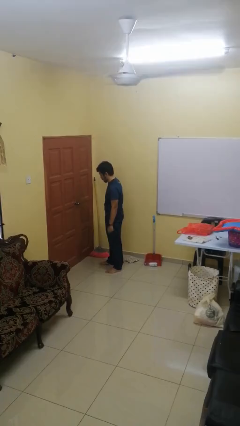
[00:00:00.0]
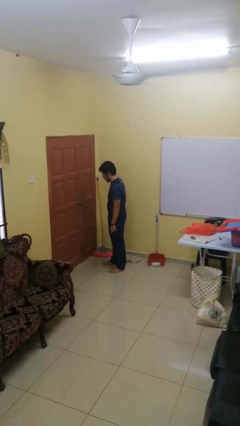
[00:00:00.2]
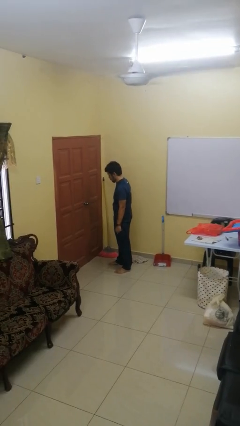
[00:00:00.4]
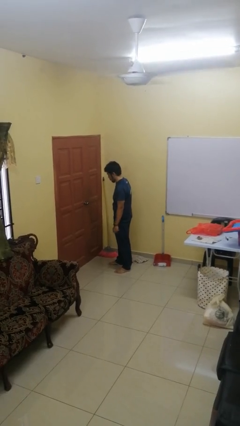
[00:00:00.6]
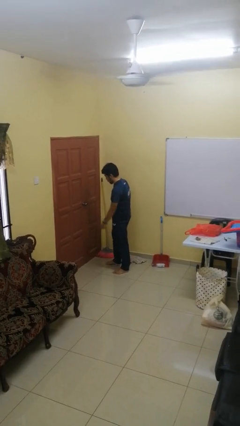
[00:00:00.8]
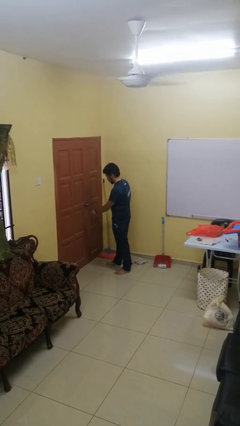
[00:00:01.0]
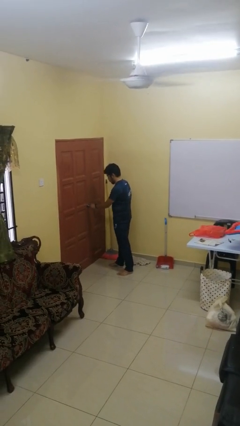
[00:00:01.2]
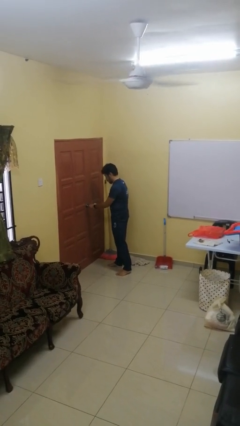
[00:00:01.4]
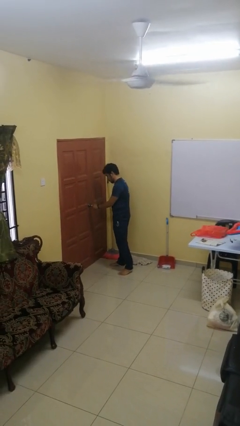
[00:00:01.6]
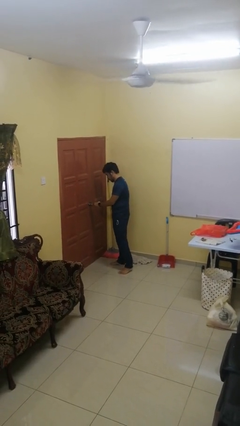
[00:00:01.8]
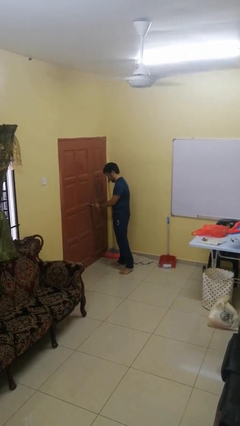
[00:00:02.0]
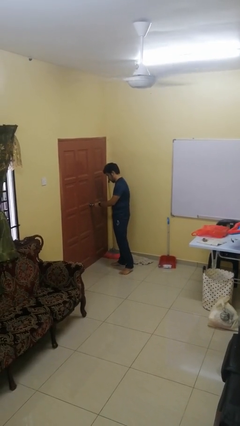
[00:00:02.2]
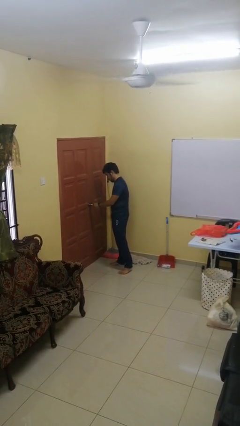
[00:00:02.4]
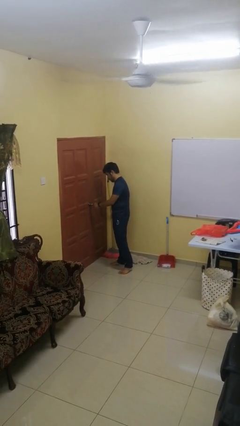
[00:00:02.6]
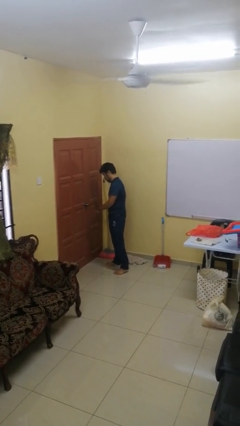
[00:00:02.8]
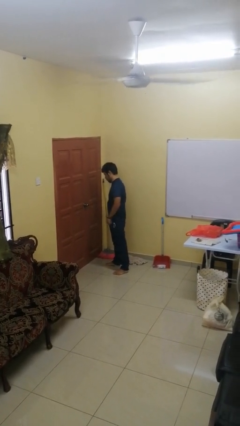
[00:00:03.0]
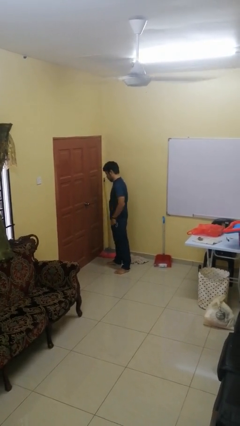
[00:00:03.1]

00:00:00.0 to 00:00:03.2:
person unlocks door with keys

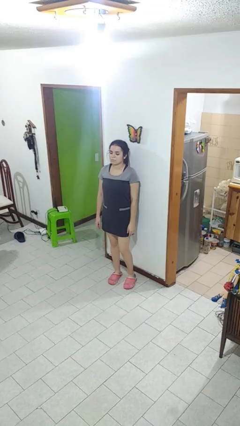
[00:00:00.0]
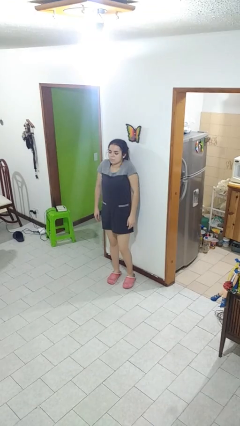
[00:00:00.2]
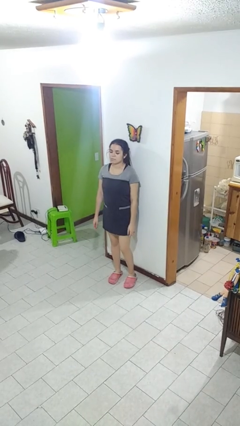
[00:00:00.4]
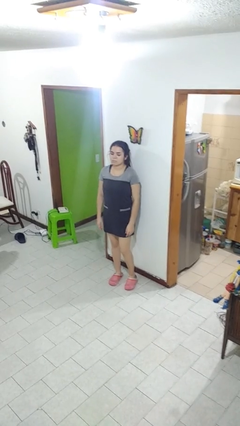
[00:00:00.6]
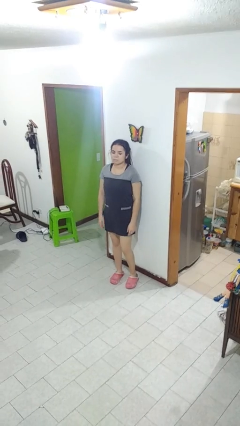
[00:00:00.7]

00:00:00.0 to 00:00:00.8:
person shrugs

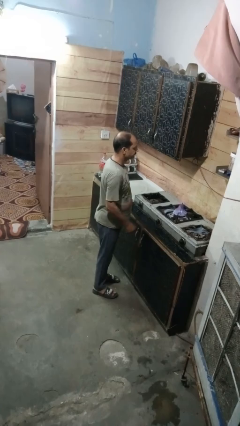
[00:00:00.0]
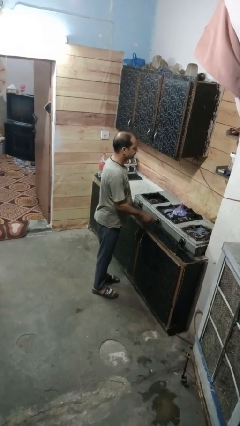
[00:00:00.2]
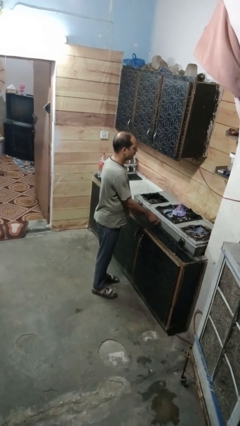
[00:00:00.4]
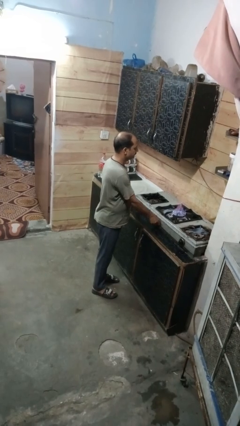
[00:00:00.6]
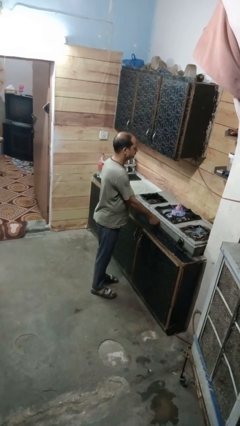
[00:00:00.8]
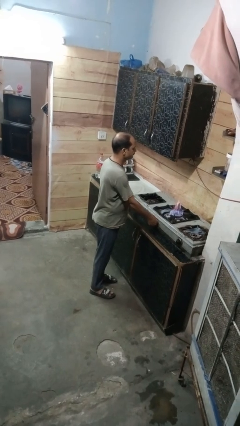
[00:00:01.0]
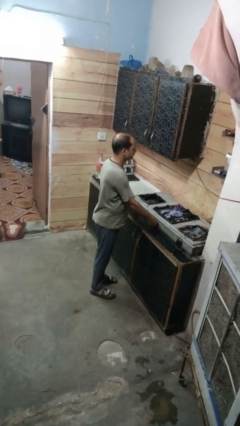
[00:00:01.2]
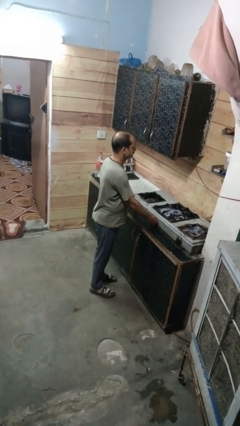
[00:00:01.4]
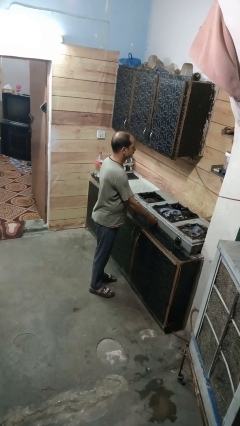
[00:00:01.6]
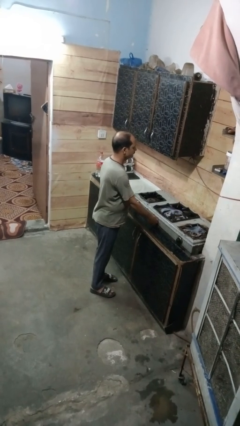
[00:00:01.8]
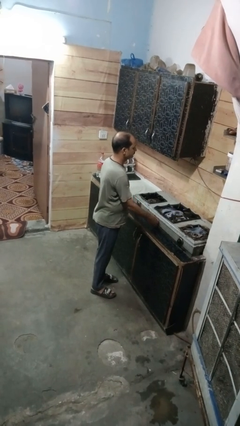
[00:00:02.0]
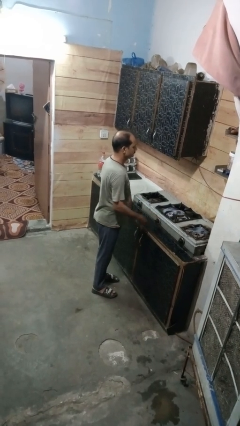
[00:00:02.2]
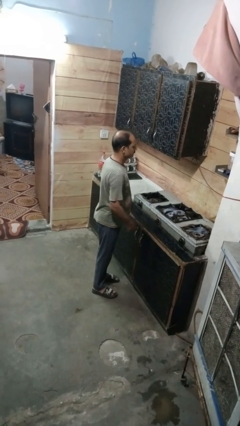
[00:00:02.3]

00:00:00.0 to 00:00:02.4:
person turns off stovetop

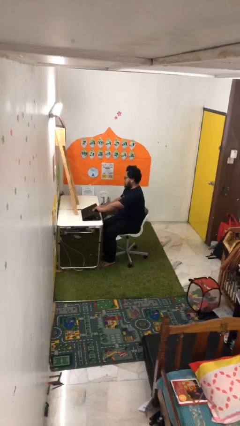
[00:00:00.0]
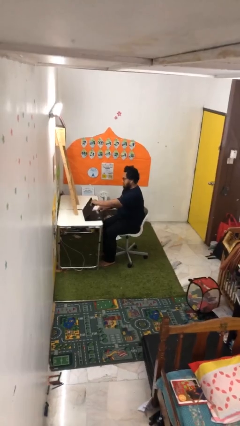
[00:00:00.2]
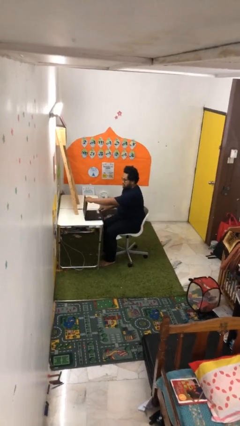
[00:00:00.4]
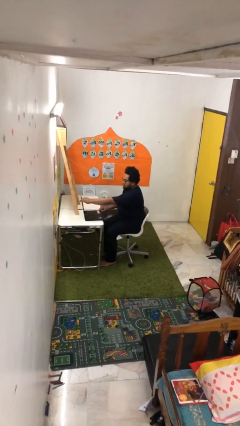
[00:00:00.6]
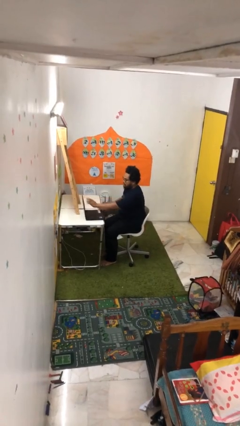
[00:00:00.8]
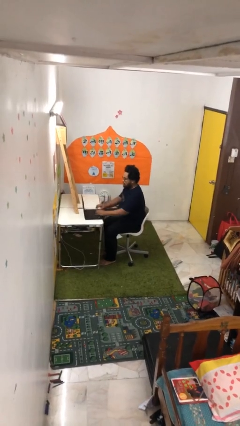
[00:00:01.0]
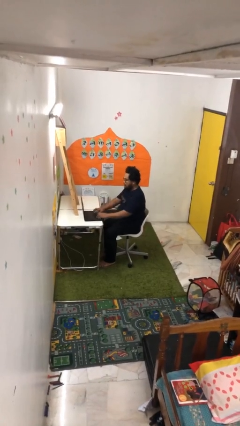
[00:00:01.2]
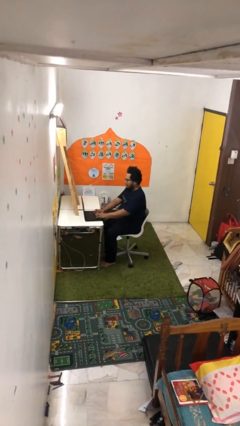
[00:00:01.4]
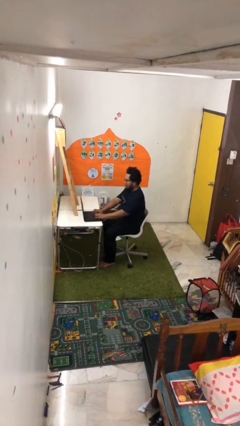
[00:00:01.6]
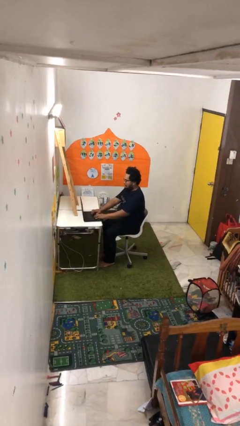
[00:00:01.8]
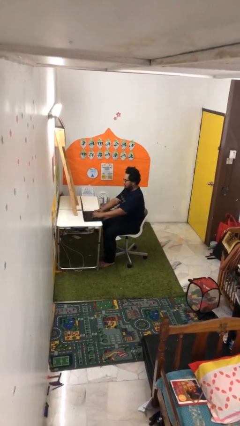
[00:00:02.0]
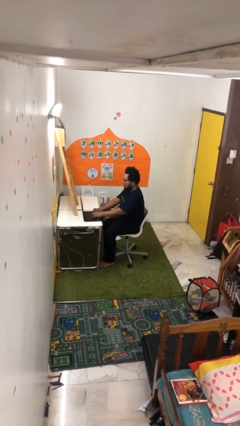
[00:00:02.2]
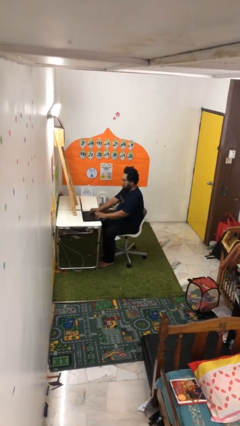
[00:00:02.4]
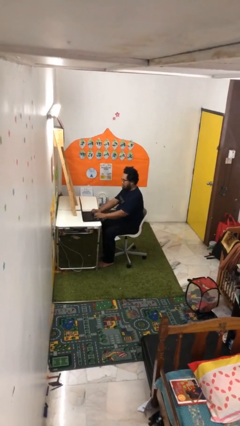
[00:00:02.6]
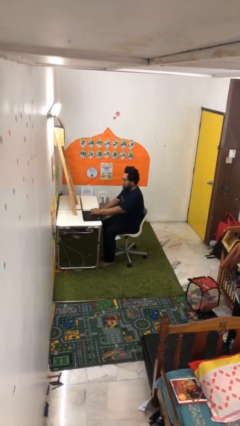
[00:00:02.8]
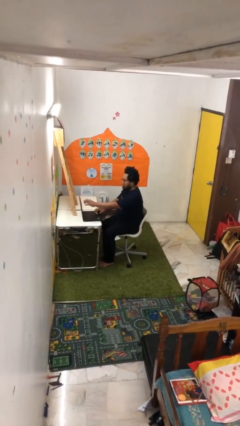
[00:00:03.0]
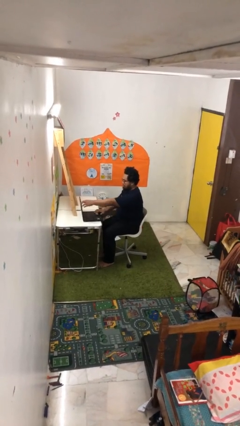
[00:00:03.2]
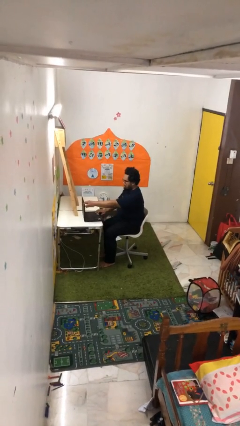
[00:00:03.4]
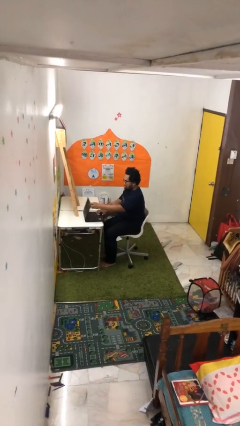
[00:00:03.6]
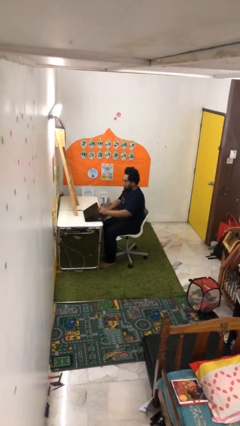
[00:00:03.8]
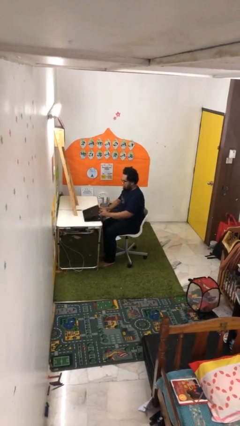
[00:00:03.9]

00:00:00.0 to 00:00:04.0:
person interacts with laptop

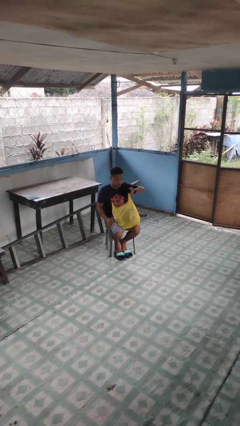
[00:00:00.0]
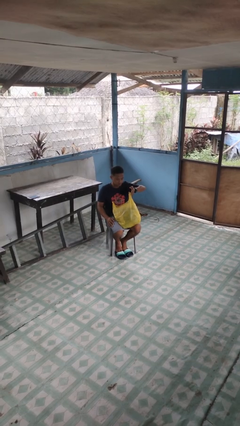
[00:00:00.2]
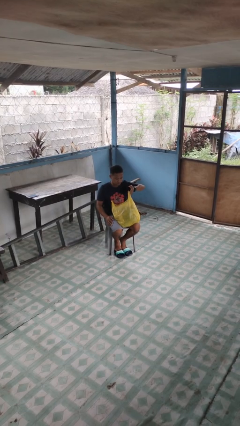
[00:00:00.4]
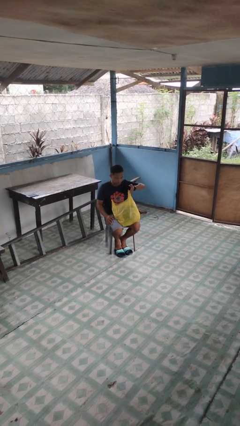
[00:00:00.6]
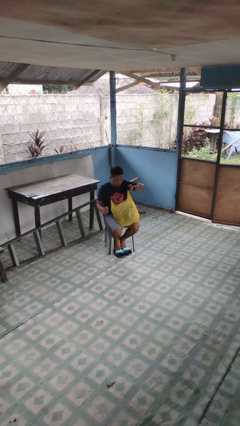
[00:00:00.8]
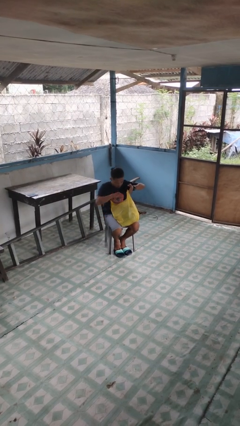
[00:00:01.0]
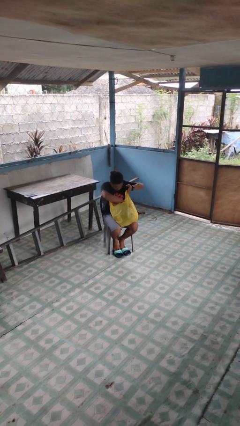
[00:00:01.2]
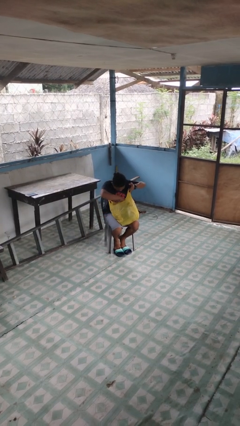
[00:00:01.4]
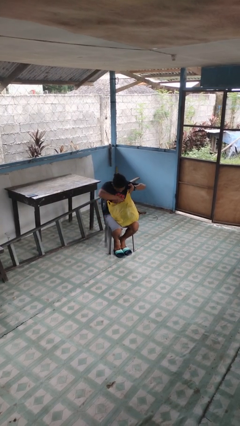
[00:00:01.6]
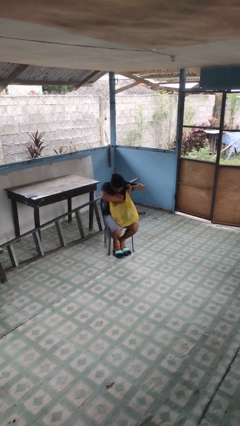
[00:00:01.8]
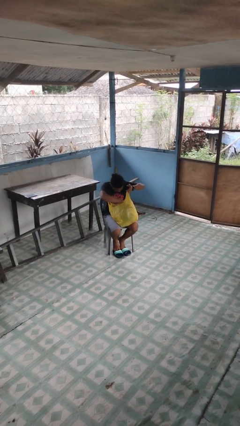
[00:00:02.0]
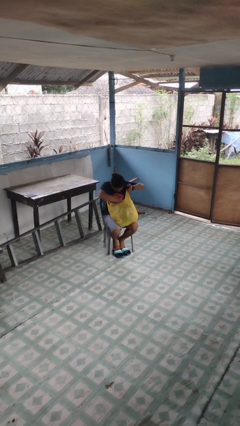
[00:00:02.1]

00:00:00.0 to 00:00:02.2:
person searches in bag

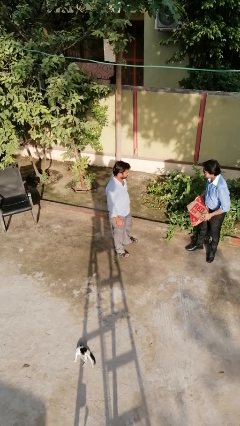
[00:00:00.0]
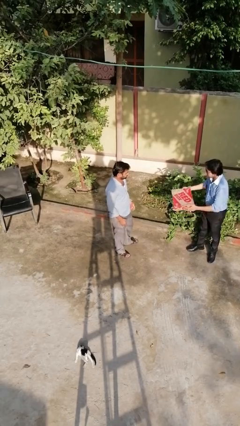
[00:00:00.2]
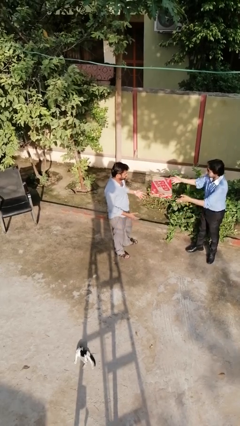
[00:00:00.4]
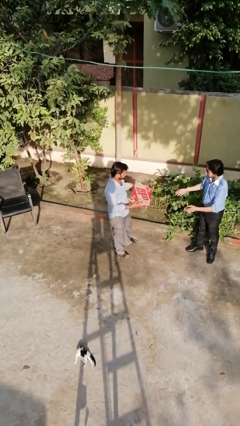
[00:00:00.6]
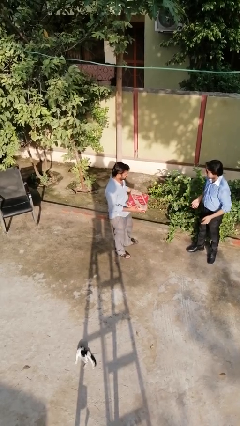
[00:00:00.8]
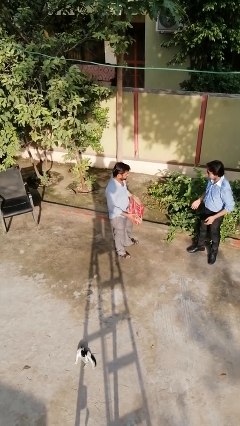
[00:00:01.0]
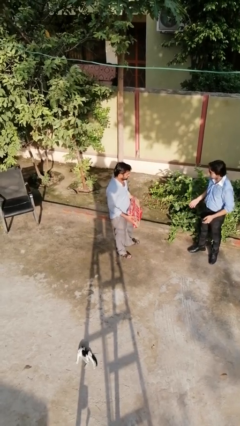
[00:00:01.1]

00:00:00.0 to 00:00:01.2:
person catches object from person

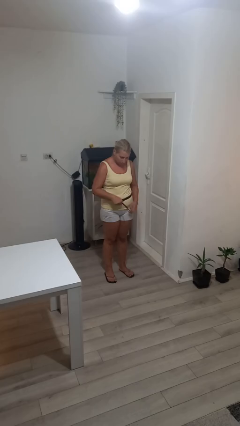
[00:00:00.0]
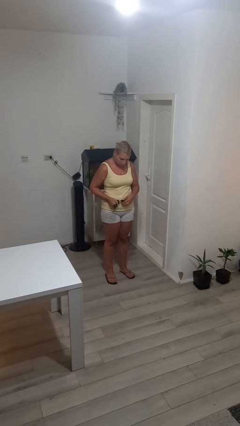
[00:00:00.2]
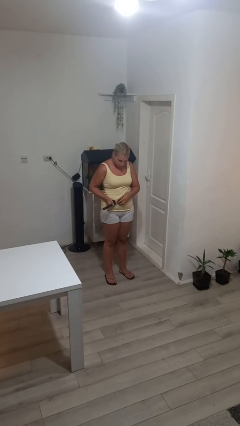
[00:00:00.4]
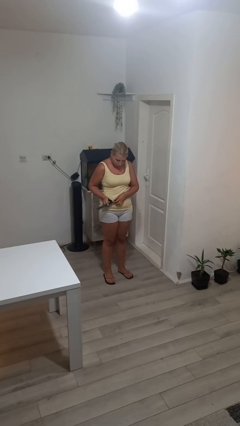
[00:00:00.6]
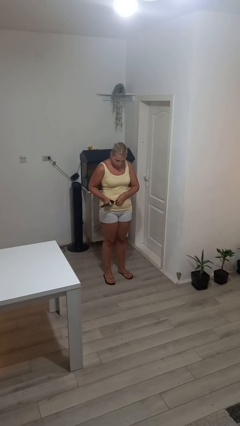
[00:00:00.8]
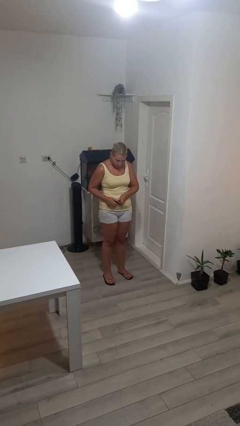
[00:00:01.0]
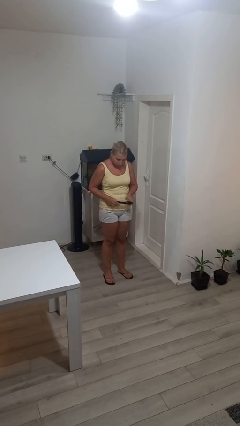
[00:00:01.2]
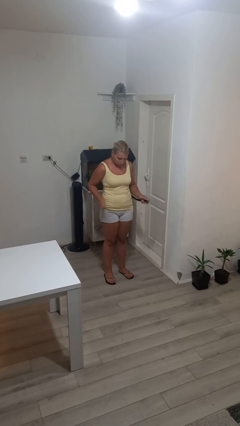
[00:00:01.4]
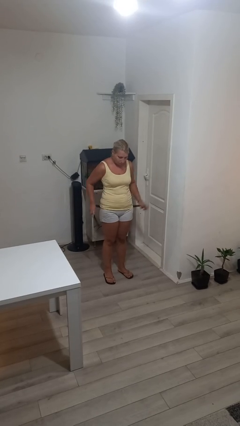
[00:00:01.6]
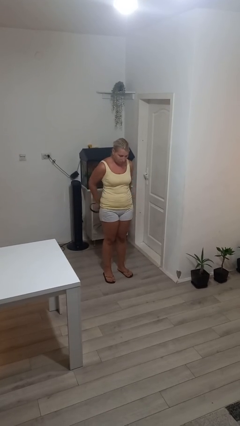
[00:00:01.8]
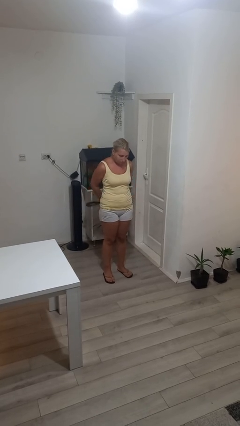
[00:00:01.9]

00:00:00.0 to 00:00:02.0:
person takes off belt

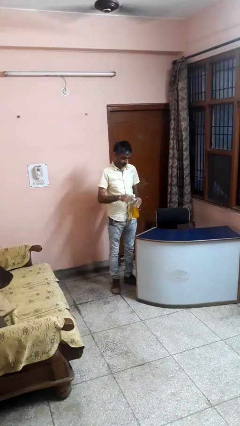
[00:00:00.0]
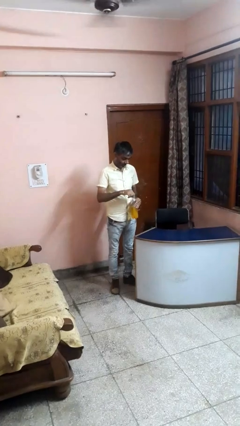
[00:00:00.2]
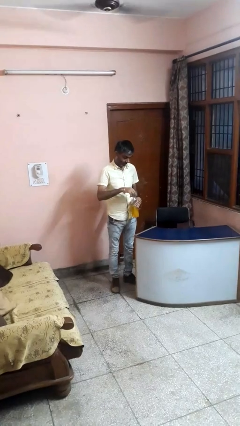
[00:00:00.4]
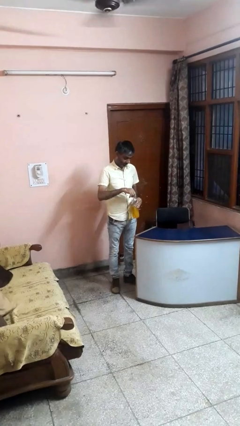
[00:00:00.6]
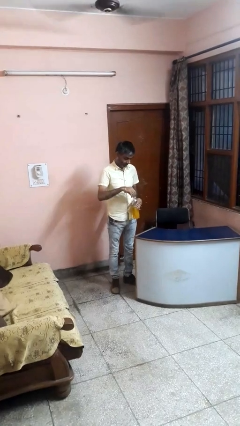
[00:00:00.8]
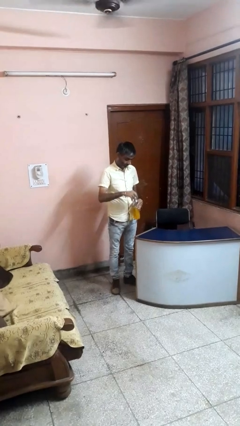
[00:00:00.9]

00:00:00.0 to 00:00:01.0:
person unscrews lid from bottle
